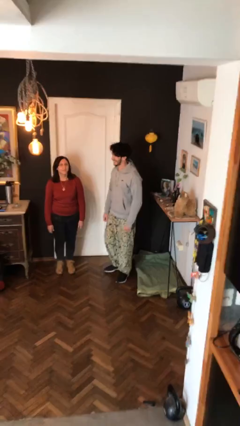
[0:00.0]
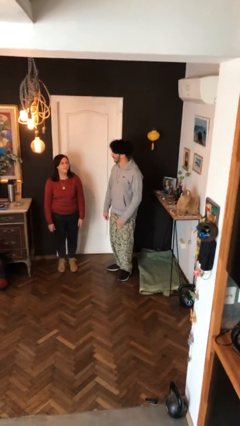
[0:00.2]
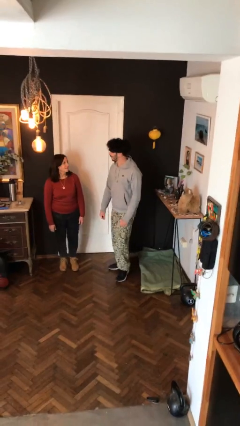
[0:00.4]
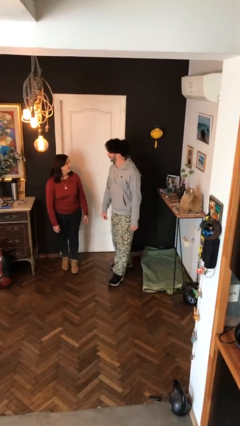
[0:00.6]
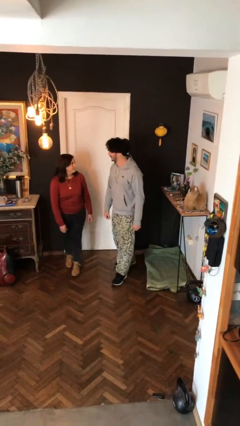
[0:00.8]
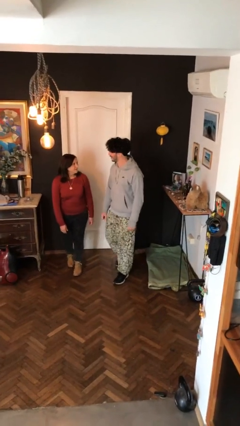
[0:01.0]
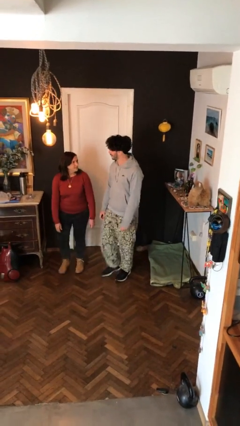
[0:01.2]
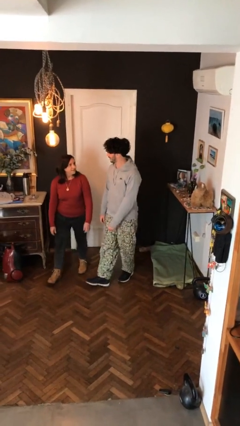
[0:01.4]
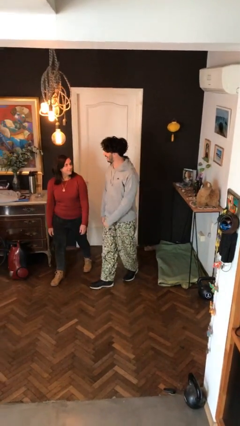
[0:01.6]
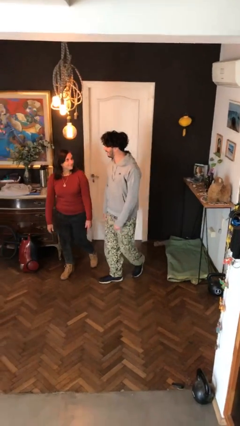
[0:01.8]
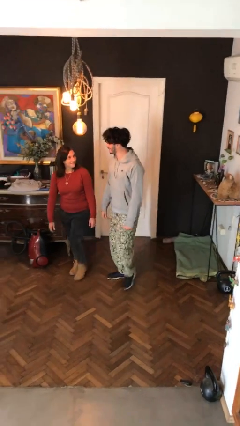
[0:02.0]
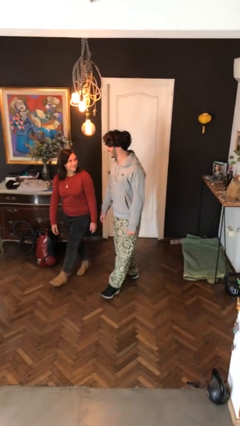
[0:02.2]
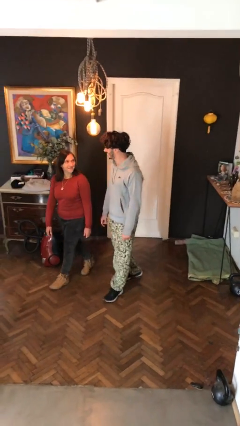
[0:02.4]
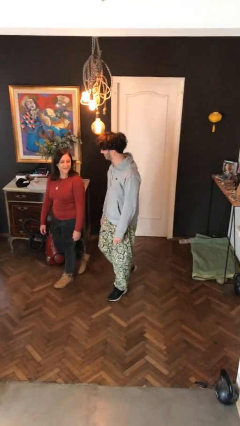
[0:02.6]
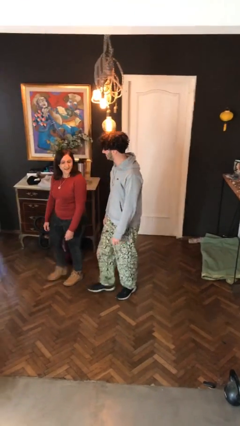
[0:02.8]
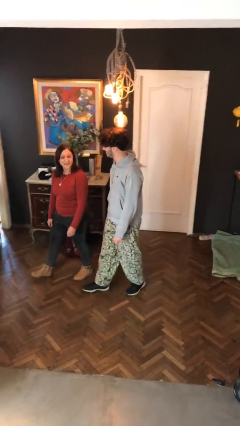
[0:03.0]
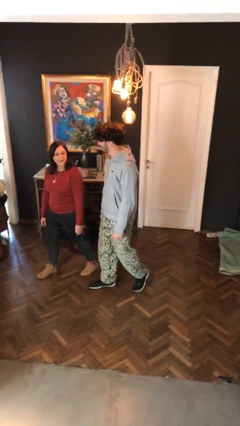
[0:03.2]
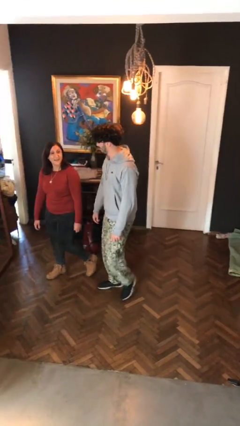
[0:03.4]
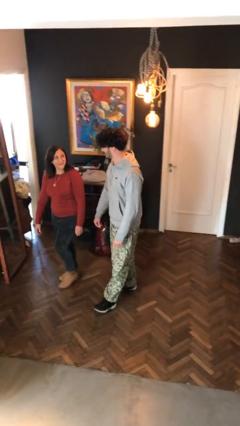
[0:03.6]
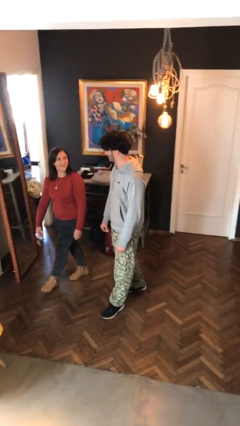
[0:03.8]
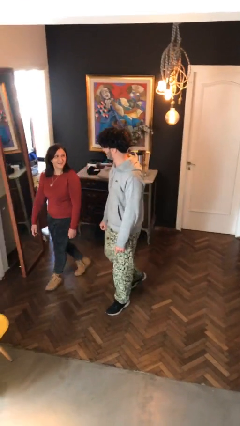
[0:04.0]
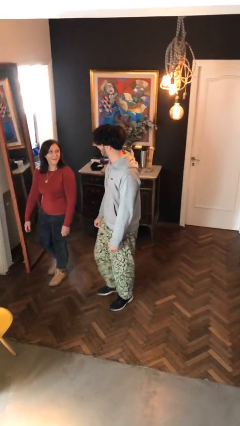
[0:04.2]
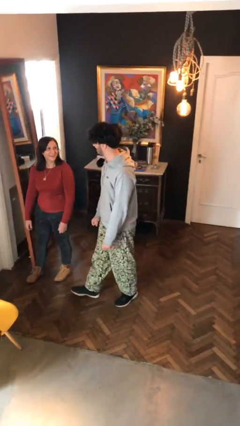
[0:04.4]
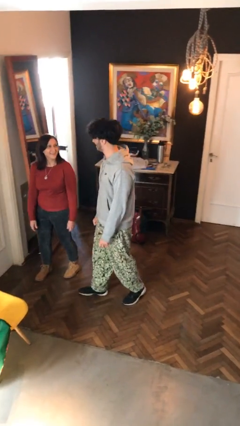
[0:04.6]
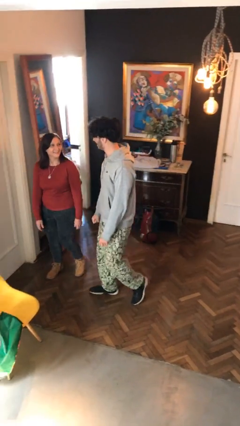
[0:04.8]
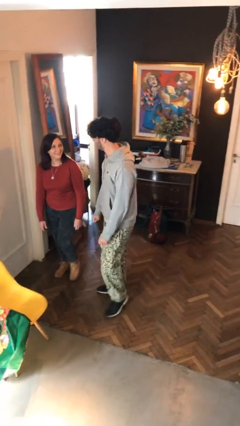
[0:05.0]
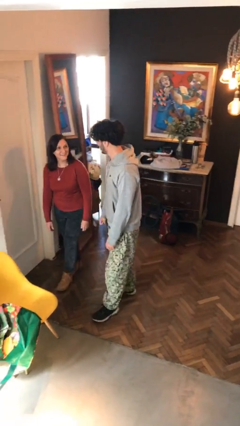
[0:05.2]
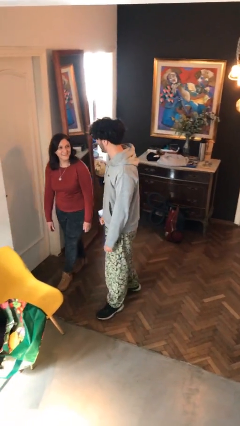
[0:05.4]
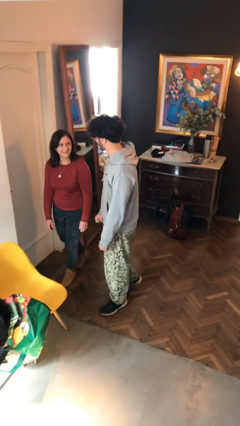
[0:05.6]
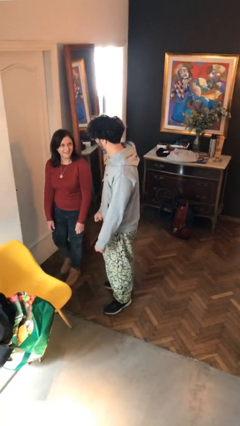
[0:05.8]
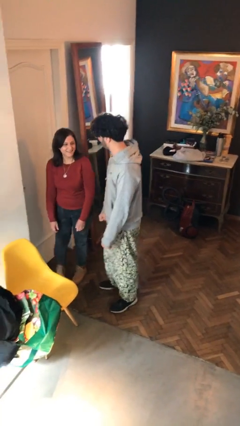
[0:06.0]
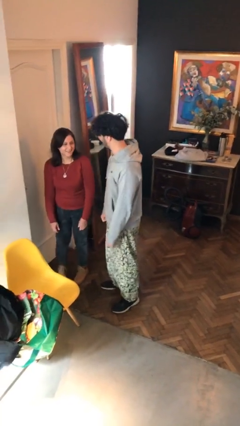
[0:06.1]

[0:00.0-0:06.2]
person talks to person

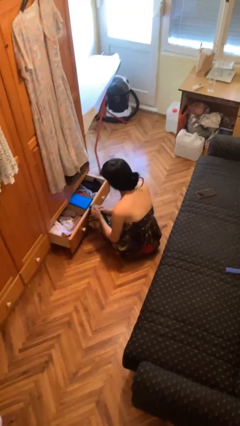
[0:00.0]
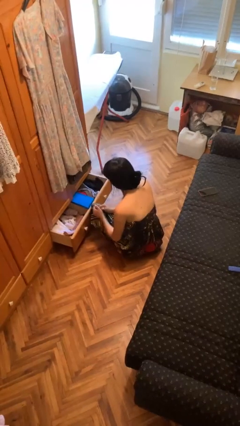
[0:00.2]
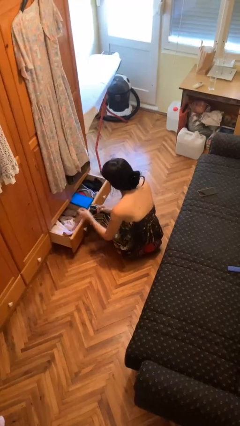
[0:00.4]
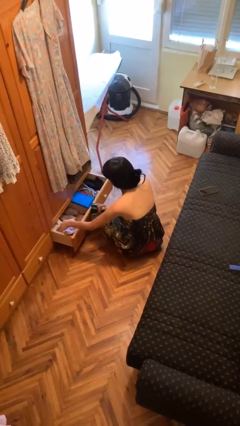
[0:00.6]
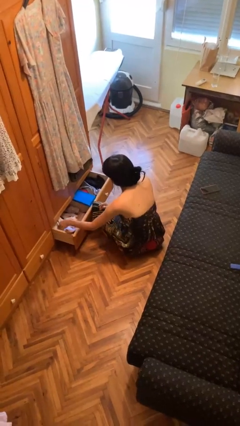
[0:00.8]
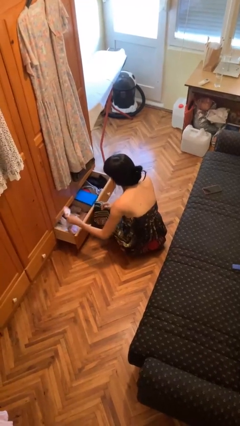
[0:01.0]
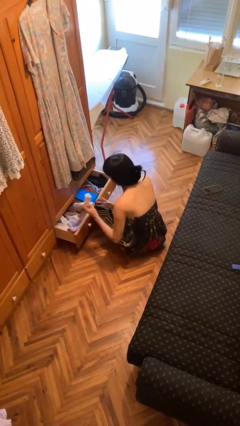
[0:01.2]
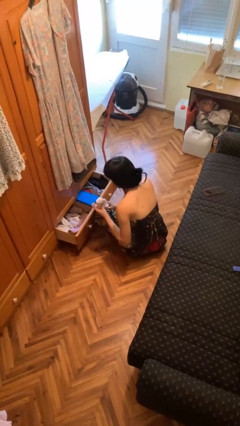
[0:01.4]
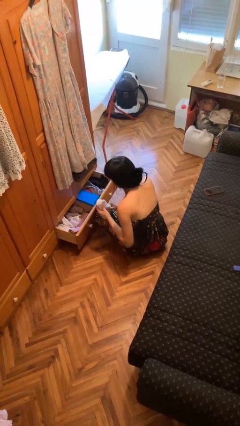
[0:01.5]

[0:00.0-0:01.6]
person takes clothes from dresser

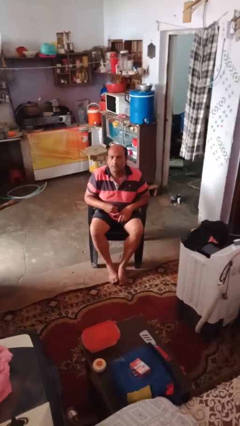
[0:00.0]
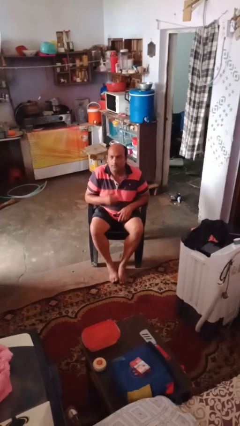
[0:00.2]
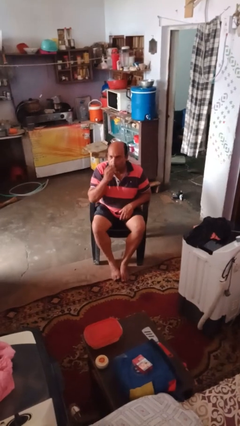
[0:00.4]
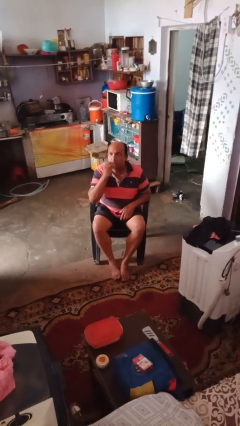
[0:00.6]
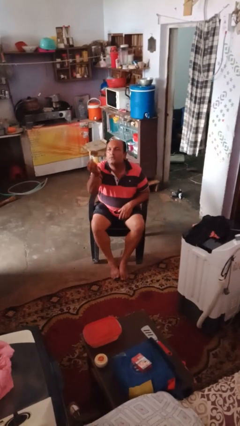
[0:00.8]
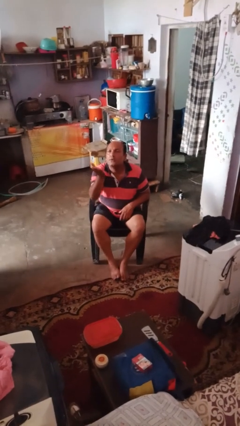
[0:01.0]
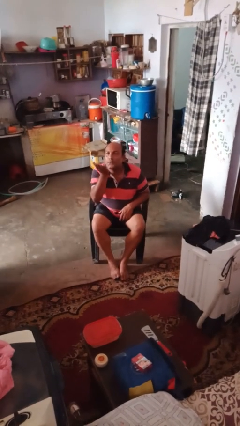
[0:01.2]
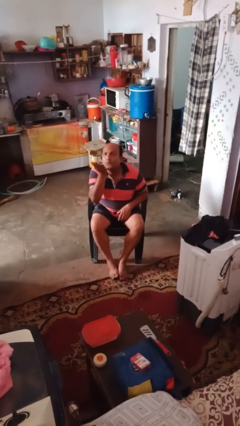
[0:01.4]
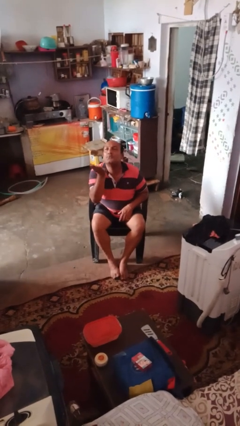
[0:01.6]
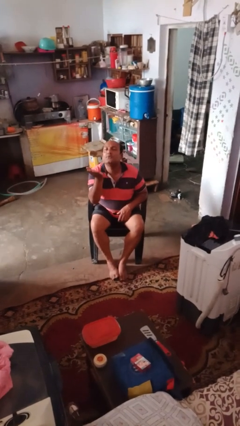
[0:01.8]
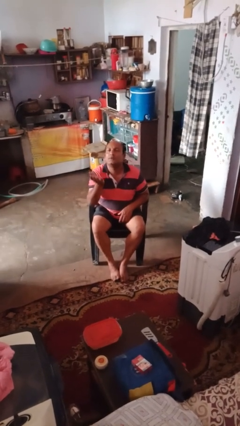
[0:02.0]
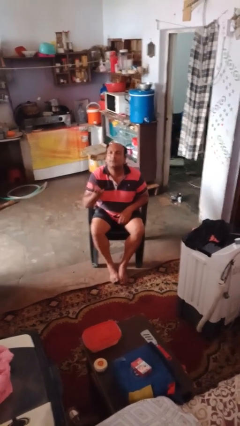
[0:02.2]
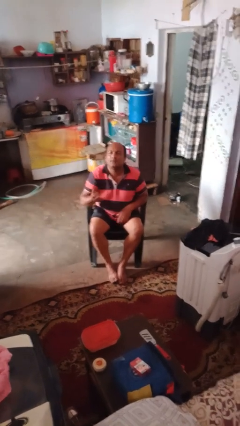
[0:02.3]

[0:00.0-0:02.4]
person gestures blow kiss

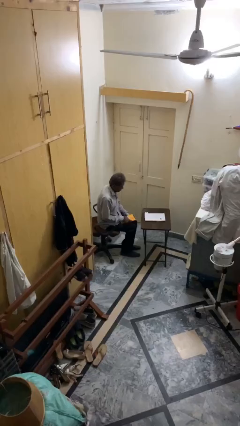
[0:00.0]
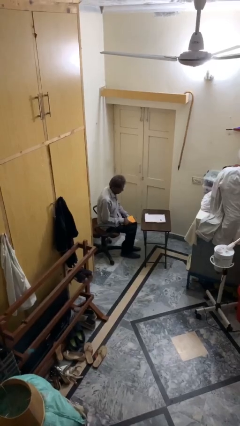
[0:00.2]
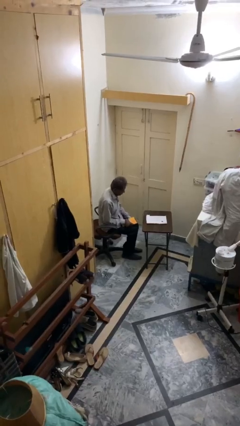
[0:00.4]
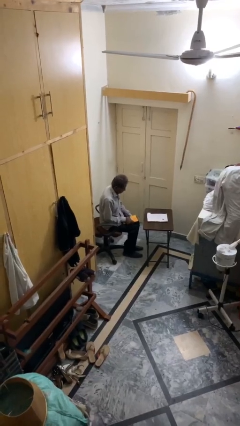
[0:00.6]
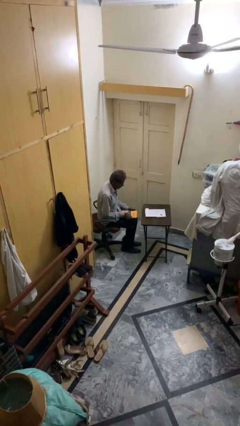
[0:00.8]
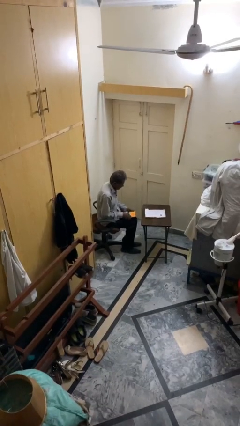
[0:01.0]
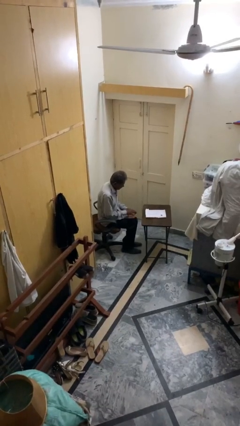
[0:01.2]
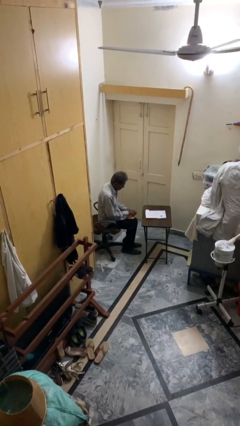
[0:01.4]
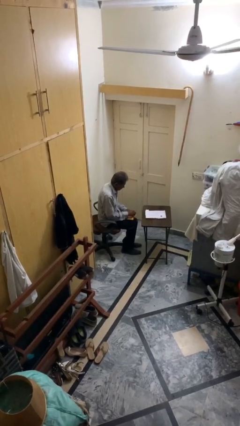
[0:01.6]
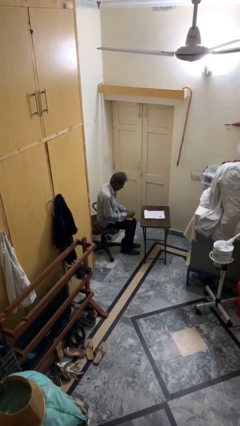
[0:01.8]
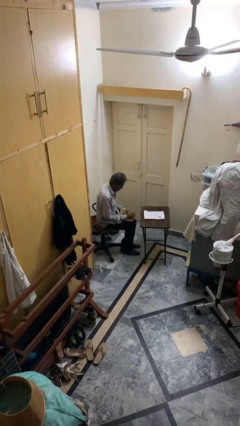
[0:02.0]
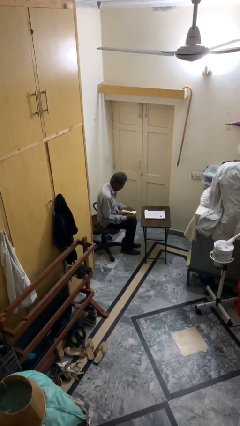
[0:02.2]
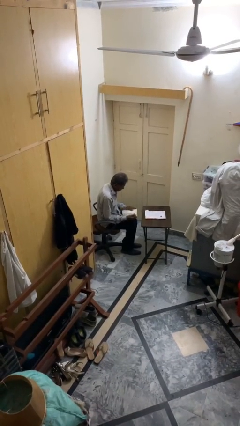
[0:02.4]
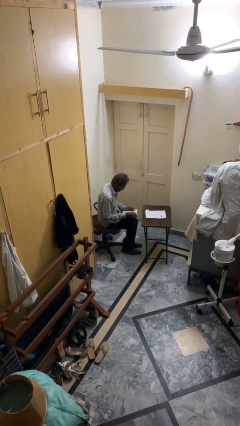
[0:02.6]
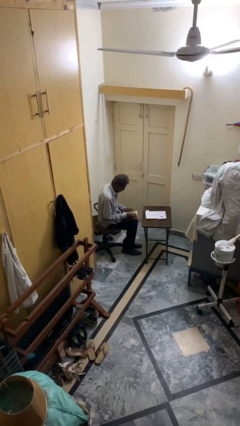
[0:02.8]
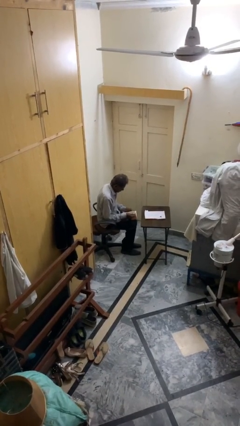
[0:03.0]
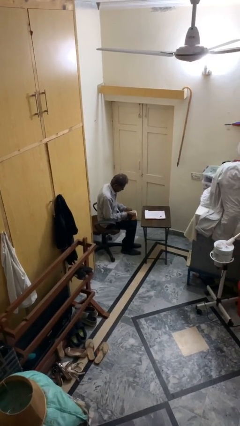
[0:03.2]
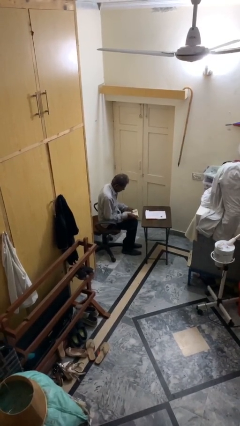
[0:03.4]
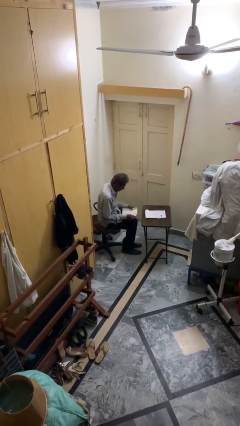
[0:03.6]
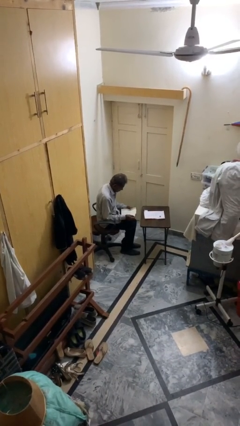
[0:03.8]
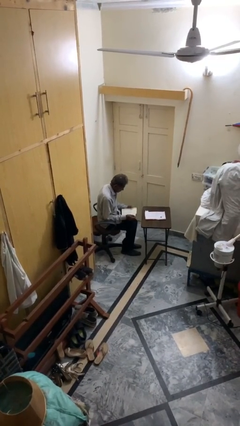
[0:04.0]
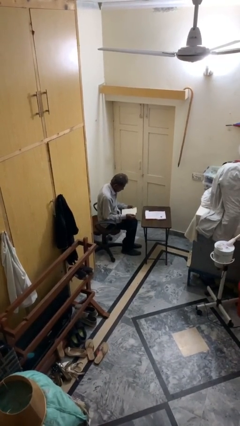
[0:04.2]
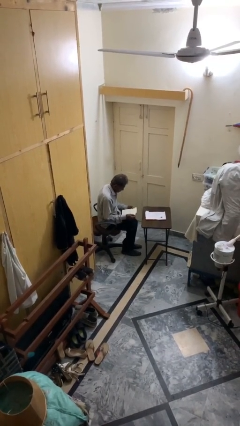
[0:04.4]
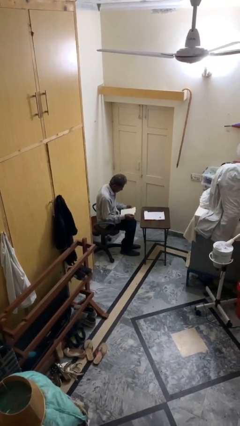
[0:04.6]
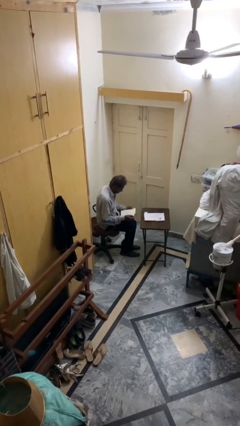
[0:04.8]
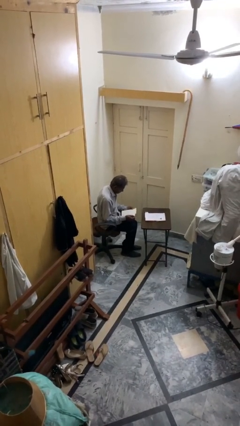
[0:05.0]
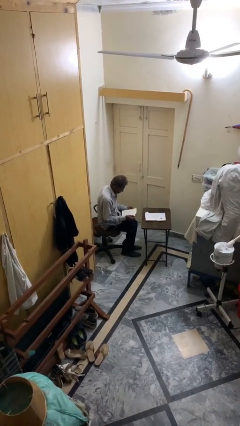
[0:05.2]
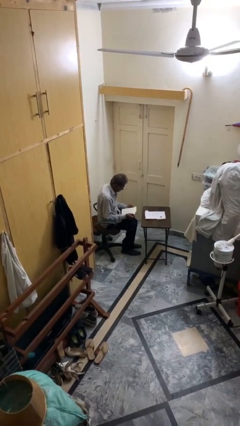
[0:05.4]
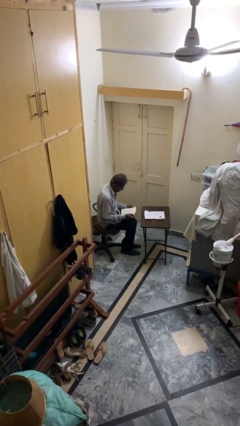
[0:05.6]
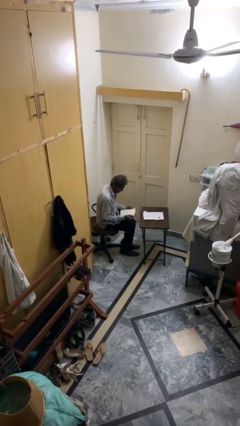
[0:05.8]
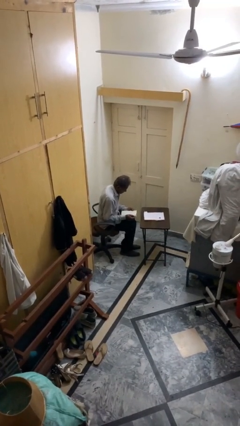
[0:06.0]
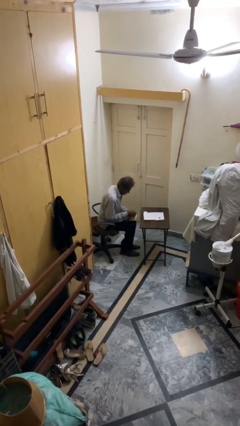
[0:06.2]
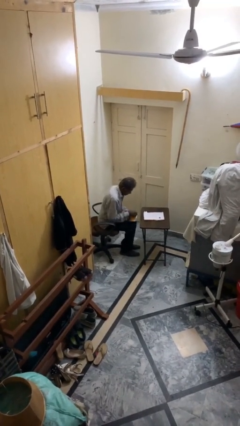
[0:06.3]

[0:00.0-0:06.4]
person reads document

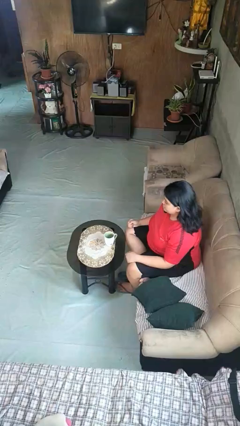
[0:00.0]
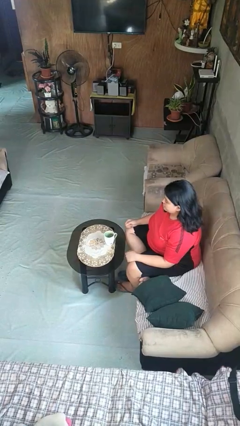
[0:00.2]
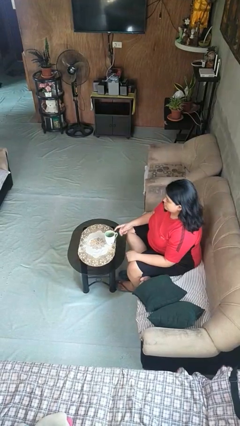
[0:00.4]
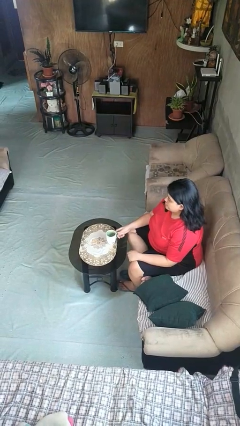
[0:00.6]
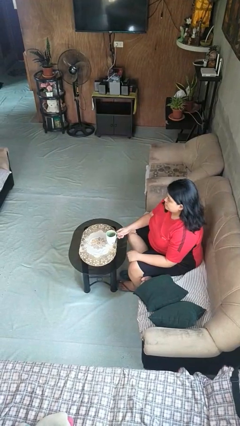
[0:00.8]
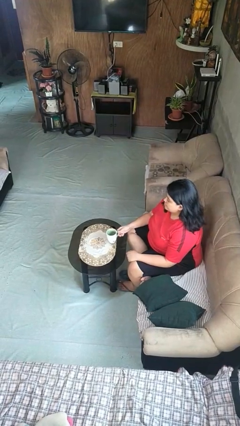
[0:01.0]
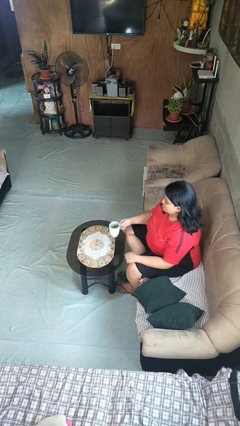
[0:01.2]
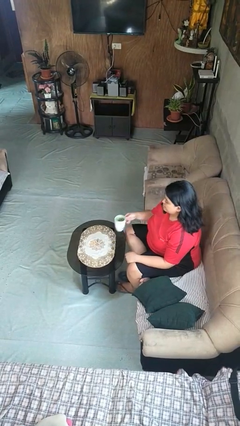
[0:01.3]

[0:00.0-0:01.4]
person picks up object from table
